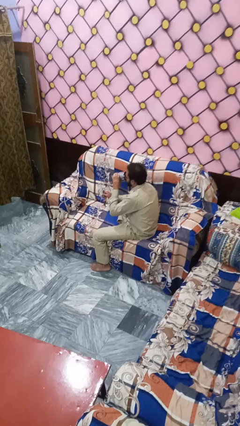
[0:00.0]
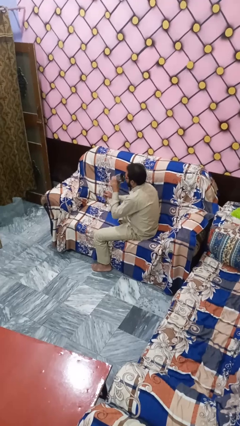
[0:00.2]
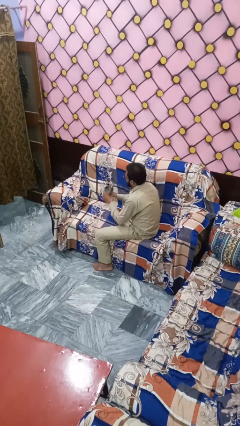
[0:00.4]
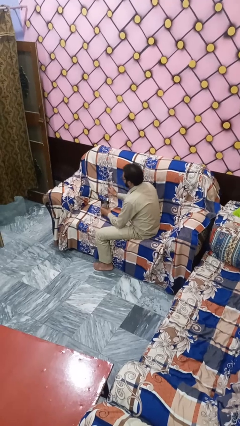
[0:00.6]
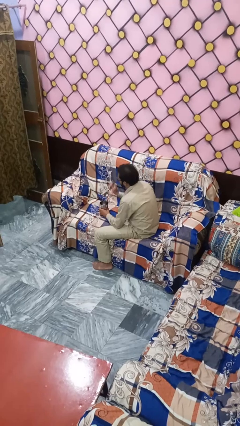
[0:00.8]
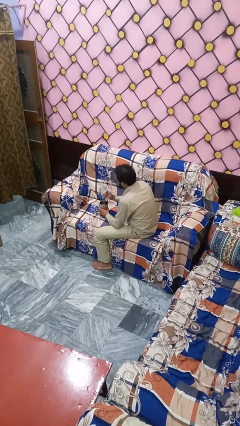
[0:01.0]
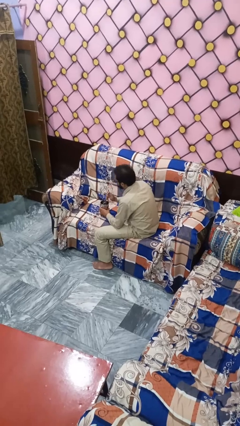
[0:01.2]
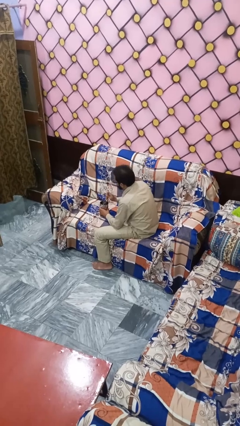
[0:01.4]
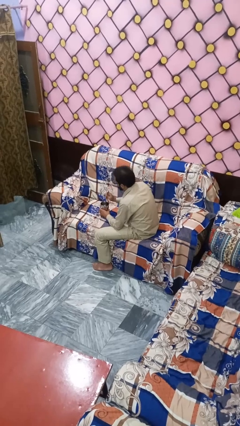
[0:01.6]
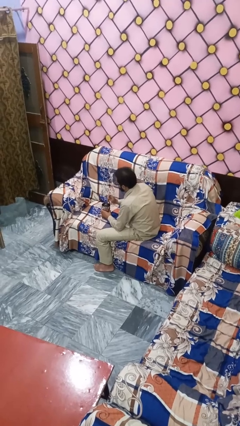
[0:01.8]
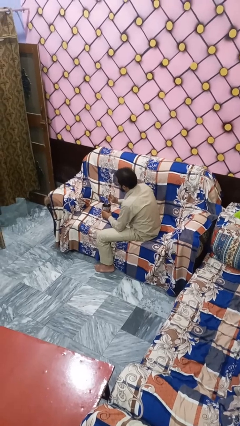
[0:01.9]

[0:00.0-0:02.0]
person stirs mug

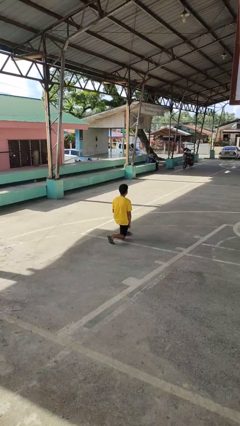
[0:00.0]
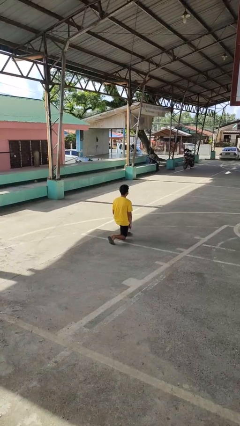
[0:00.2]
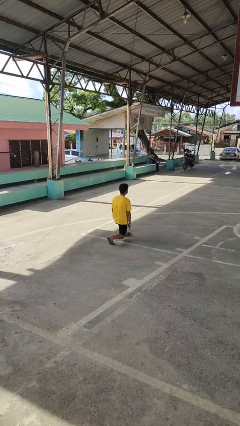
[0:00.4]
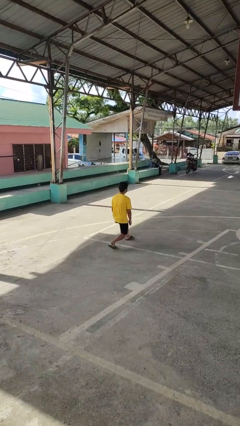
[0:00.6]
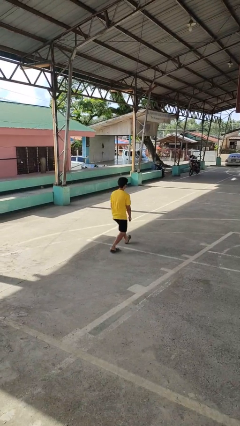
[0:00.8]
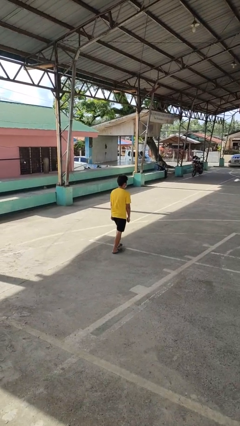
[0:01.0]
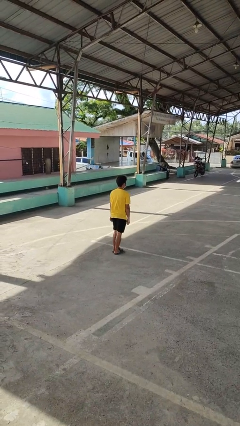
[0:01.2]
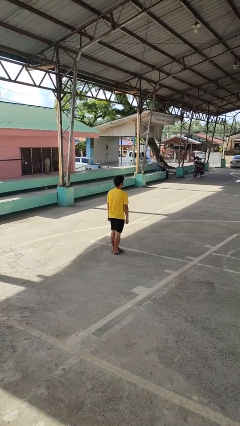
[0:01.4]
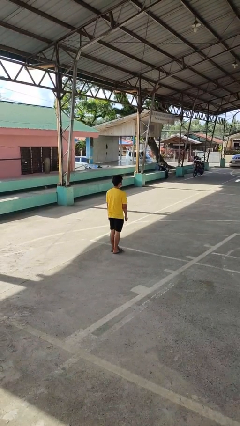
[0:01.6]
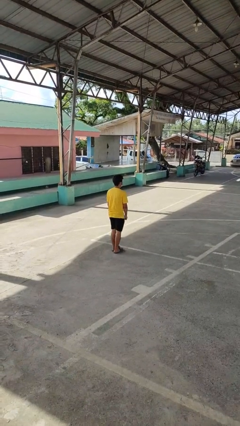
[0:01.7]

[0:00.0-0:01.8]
person stands up from floor

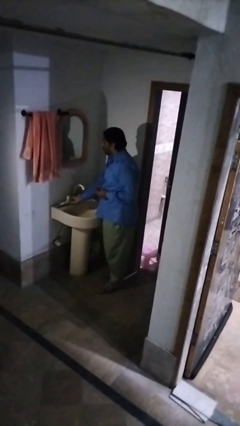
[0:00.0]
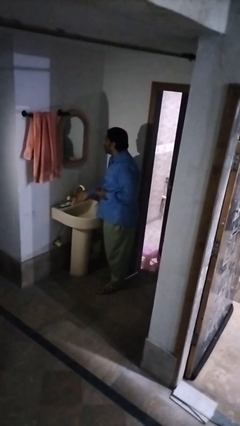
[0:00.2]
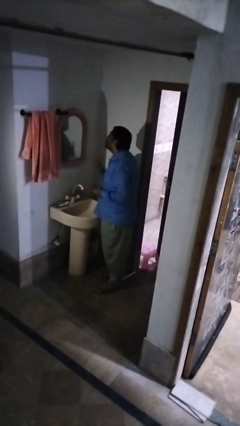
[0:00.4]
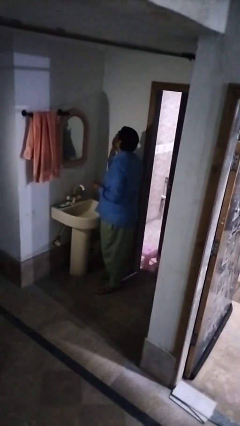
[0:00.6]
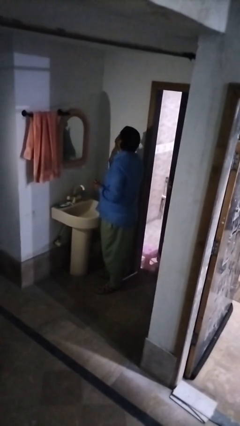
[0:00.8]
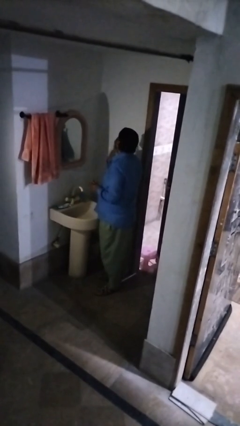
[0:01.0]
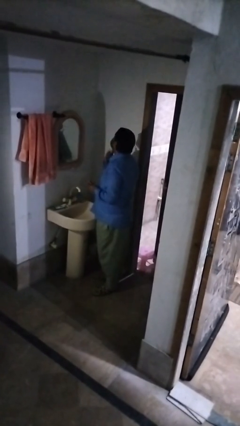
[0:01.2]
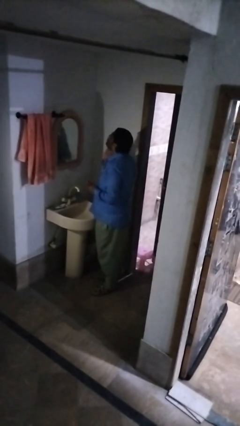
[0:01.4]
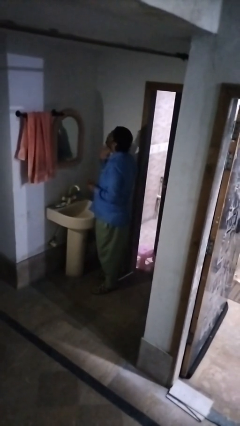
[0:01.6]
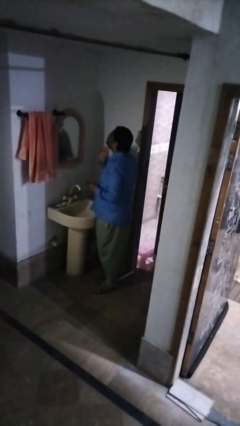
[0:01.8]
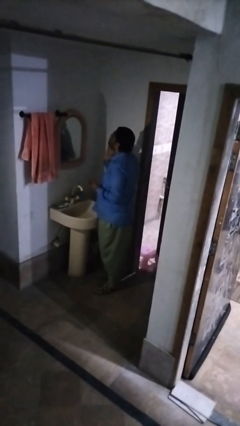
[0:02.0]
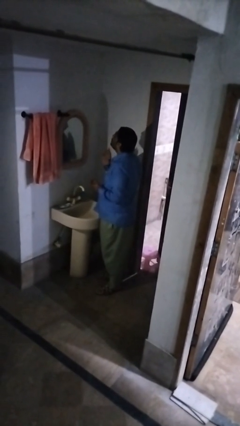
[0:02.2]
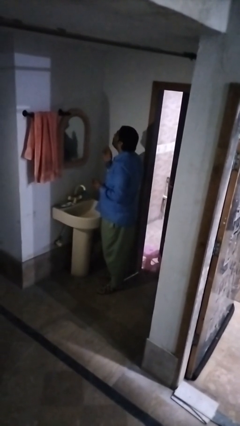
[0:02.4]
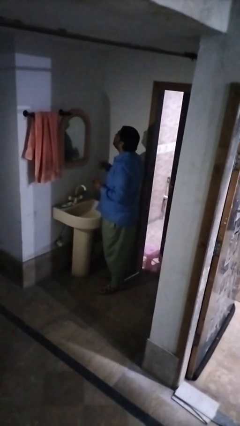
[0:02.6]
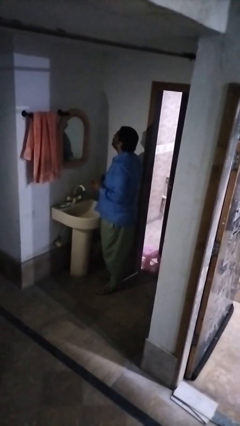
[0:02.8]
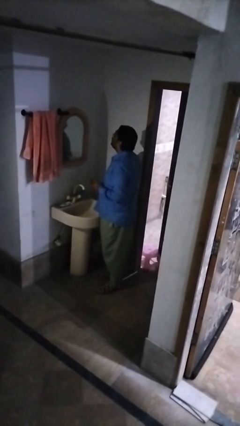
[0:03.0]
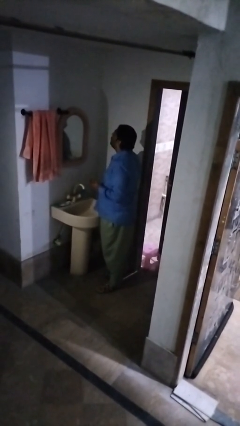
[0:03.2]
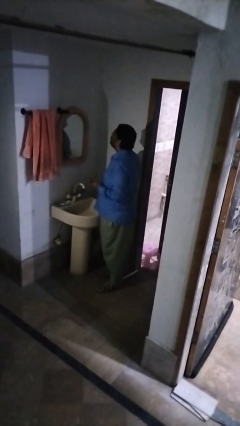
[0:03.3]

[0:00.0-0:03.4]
person shaves face

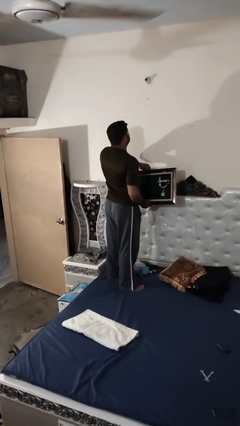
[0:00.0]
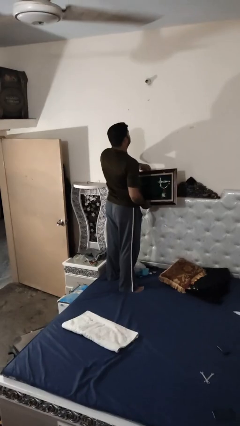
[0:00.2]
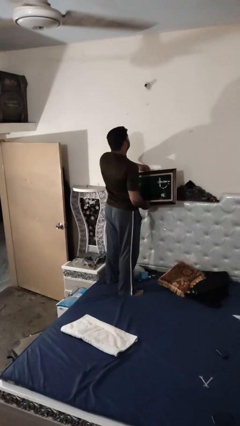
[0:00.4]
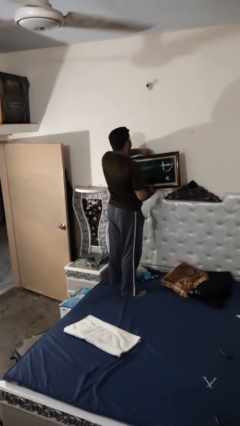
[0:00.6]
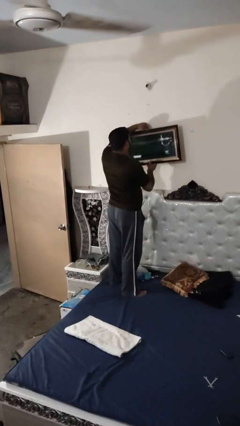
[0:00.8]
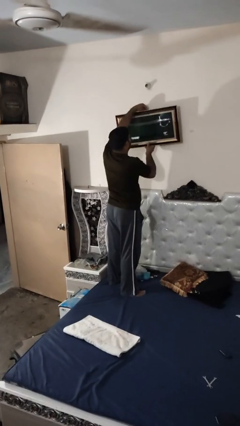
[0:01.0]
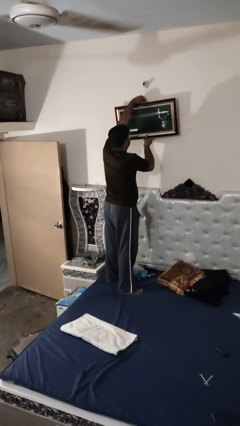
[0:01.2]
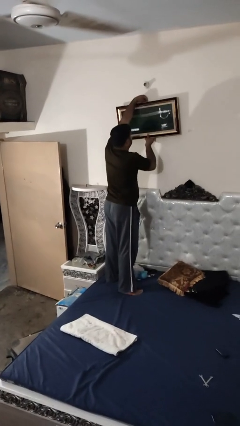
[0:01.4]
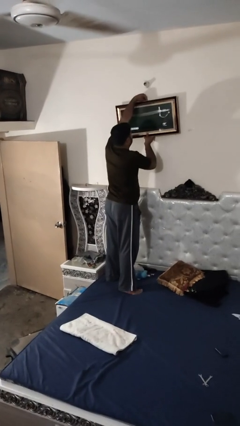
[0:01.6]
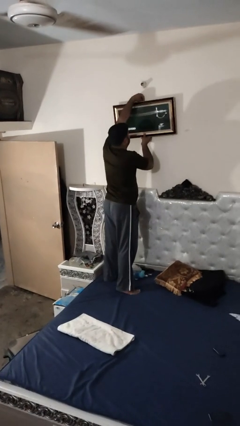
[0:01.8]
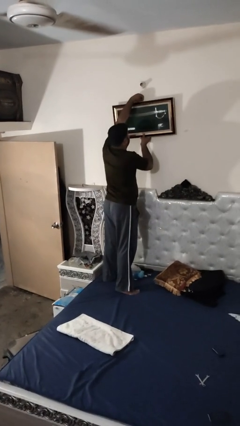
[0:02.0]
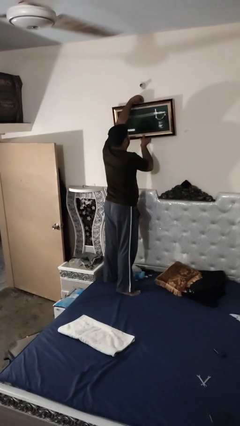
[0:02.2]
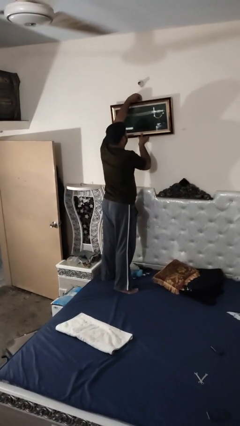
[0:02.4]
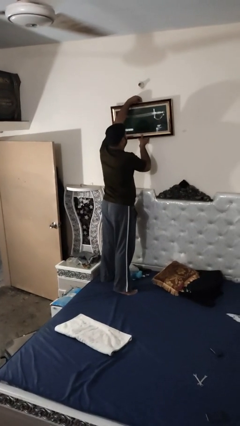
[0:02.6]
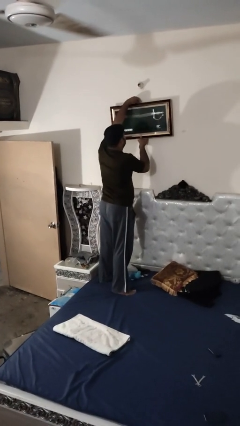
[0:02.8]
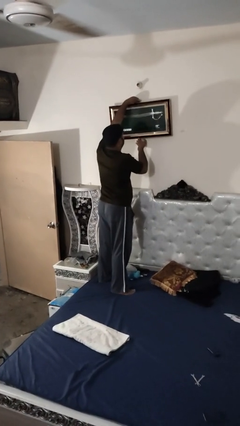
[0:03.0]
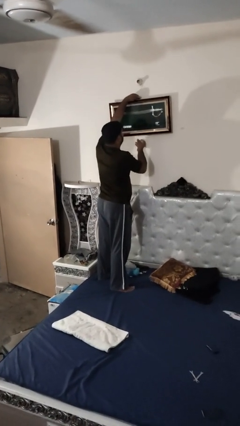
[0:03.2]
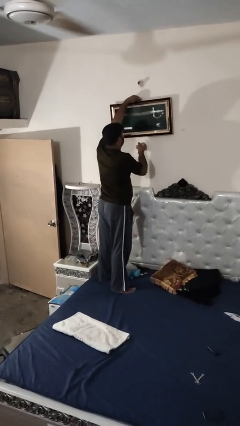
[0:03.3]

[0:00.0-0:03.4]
person puts up picture frame

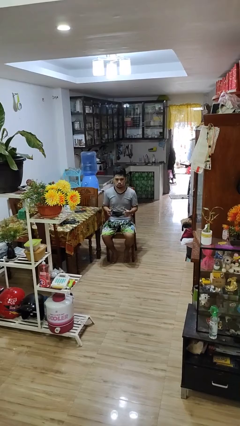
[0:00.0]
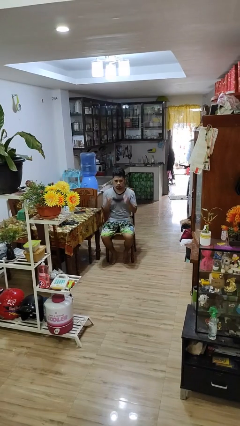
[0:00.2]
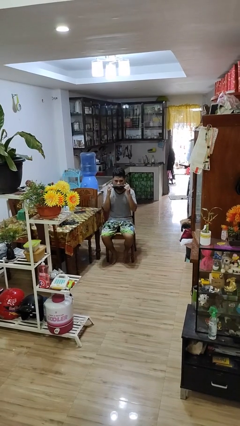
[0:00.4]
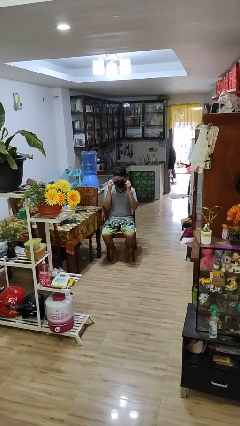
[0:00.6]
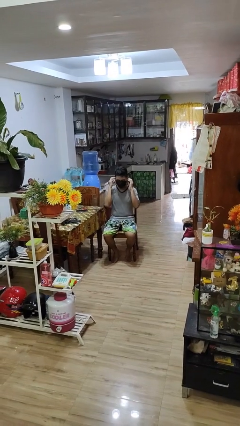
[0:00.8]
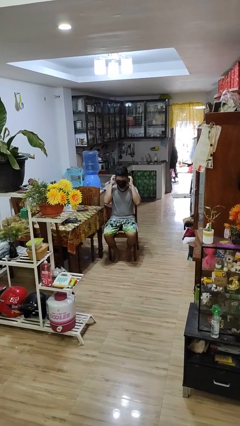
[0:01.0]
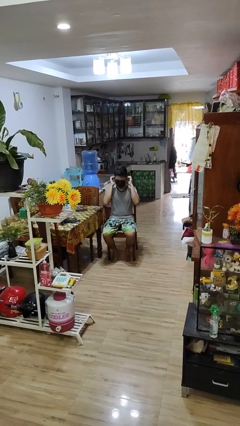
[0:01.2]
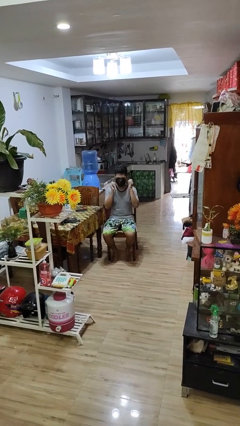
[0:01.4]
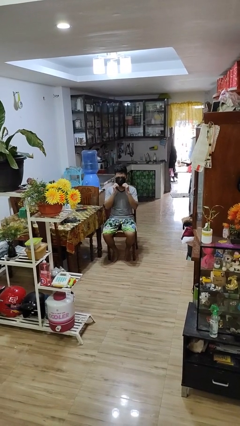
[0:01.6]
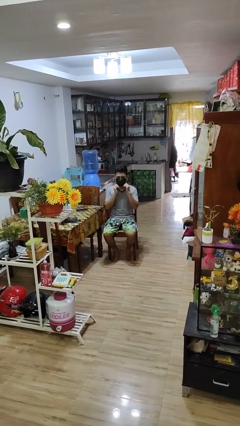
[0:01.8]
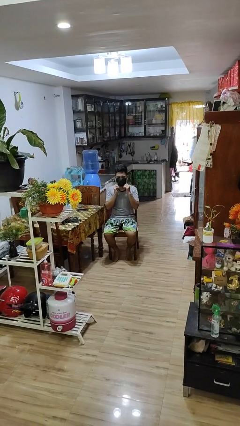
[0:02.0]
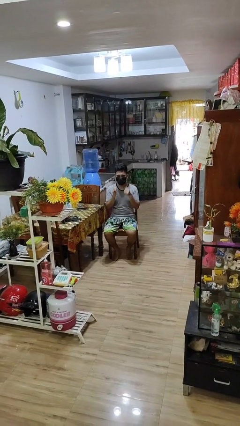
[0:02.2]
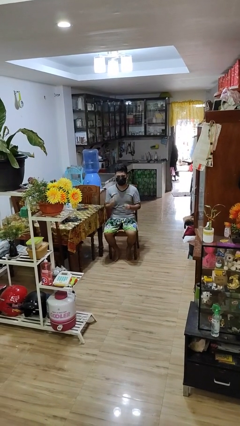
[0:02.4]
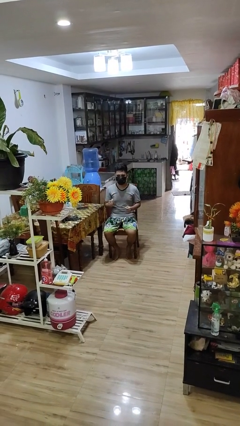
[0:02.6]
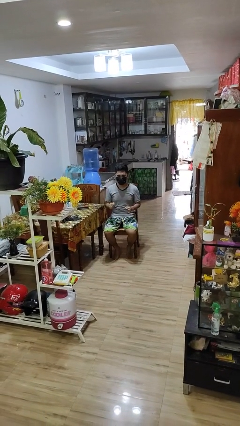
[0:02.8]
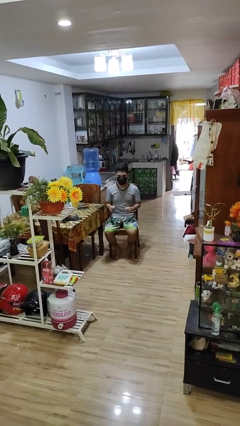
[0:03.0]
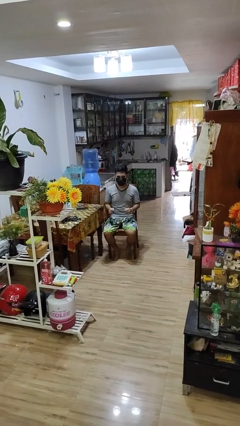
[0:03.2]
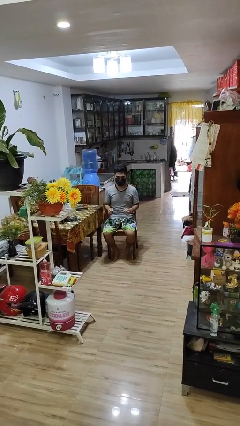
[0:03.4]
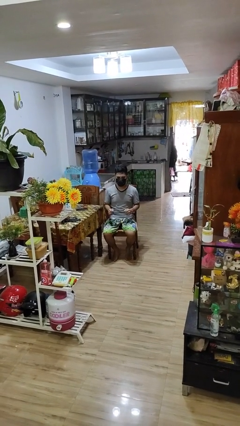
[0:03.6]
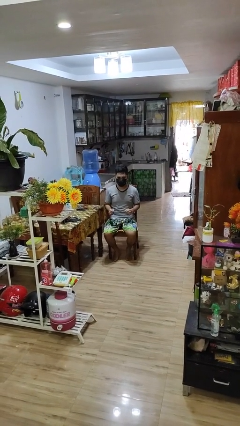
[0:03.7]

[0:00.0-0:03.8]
person puts on facemask

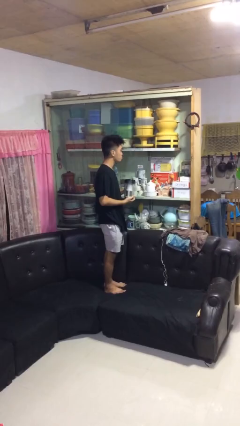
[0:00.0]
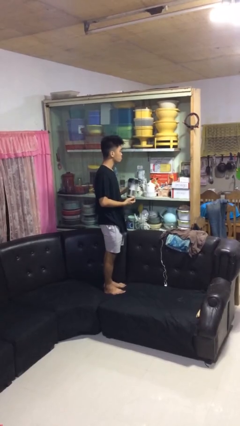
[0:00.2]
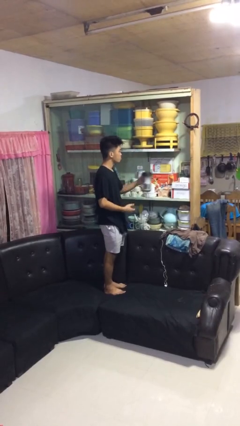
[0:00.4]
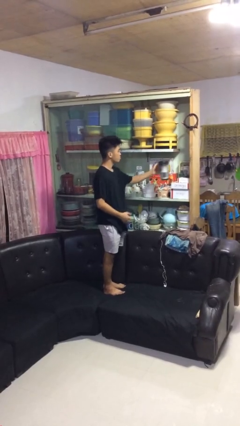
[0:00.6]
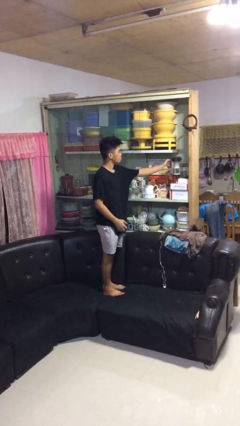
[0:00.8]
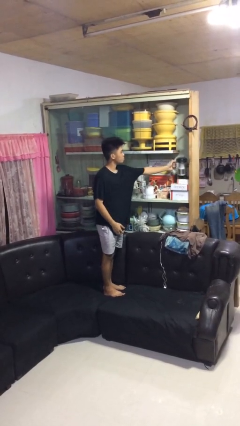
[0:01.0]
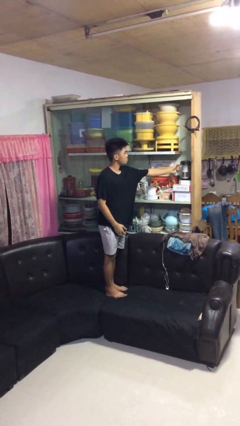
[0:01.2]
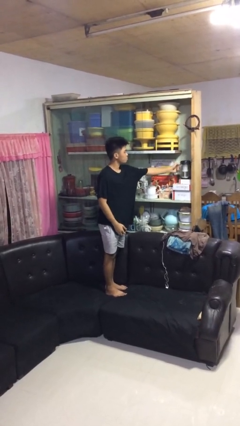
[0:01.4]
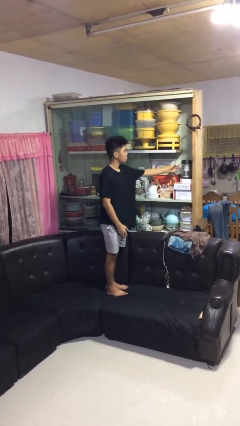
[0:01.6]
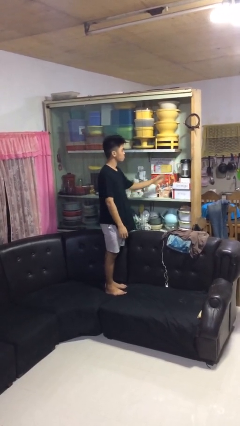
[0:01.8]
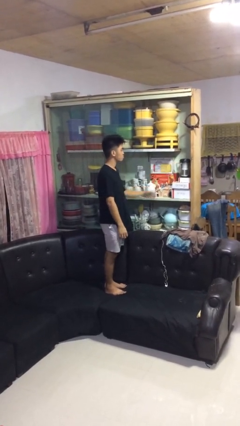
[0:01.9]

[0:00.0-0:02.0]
person puts down object into cabinet

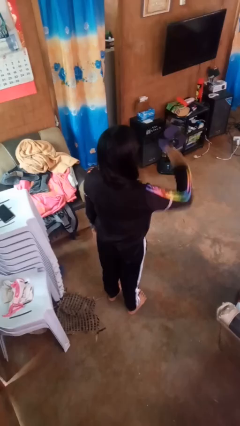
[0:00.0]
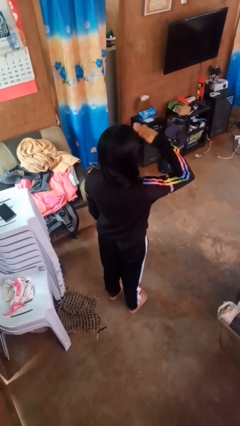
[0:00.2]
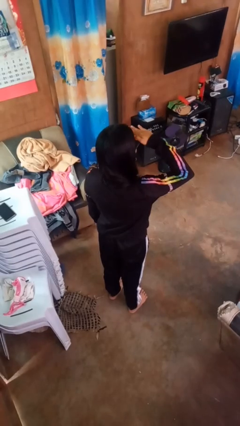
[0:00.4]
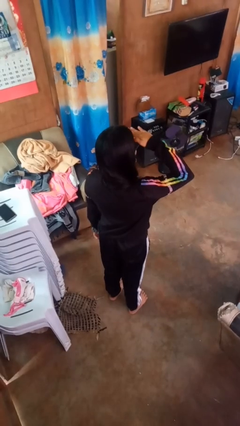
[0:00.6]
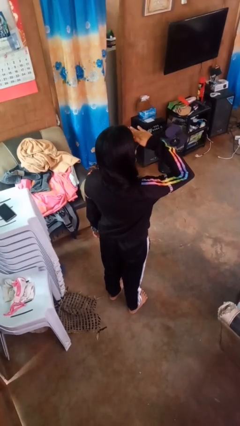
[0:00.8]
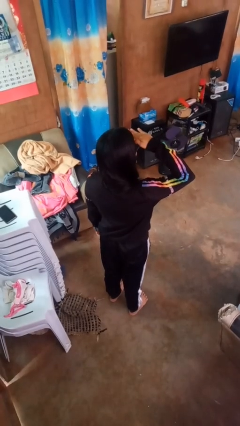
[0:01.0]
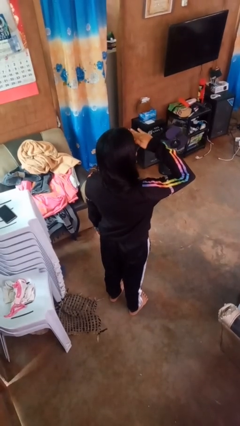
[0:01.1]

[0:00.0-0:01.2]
person salutes
